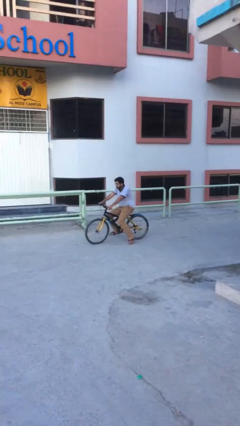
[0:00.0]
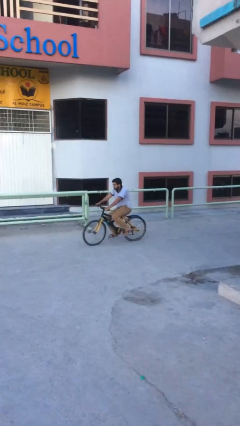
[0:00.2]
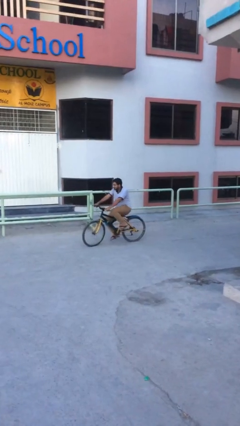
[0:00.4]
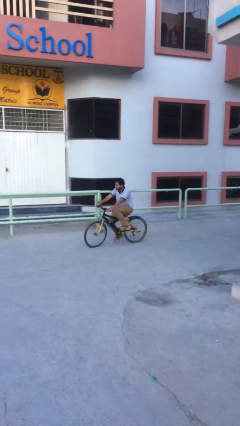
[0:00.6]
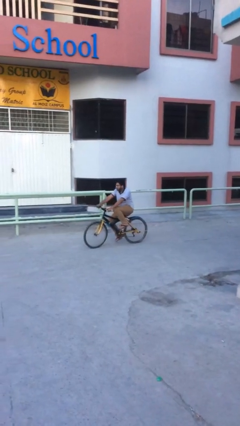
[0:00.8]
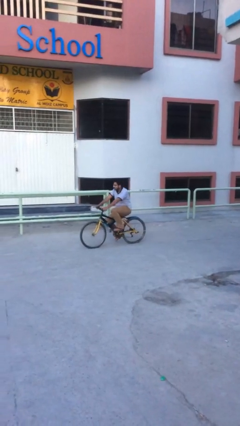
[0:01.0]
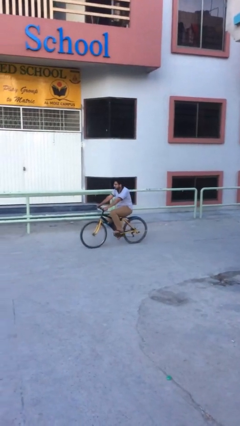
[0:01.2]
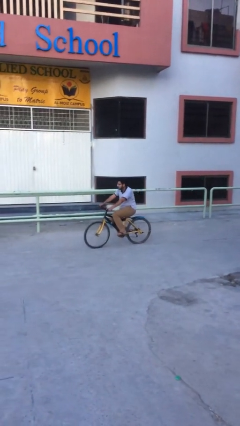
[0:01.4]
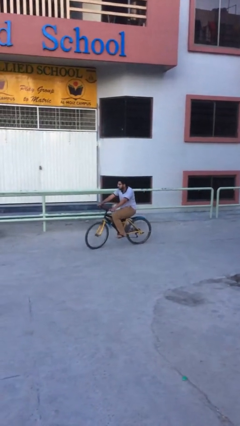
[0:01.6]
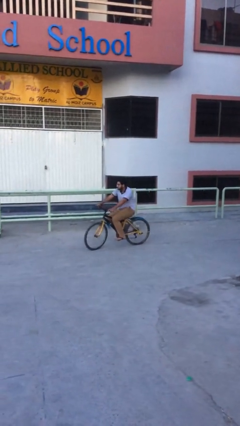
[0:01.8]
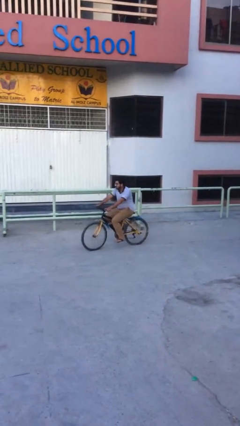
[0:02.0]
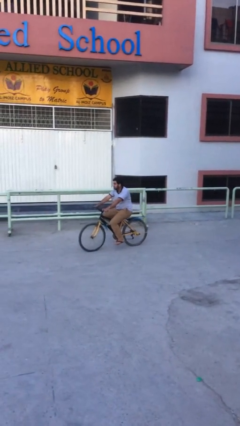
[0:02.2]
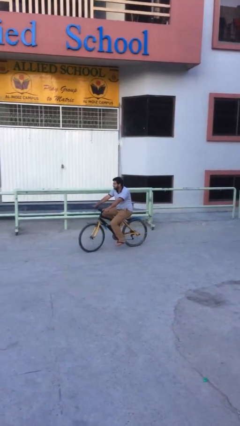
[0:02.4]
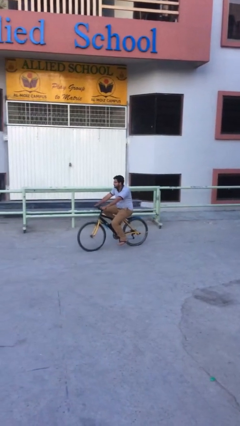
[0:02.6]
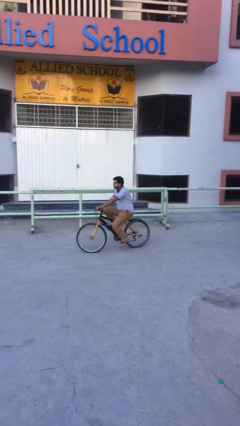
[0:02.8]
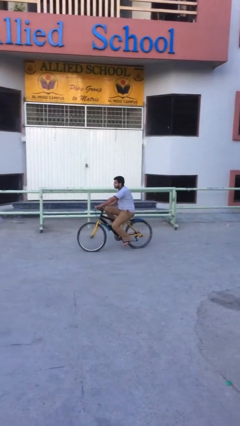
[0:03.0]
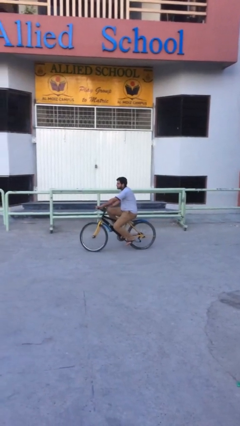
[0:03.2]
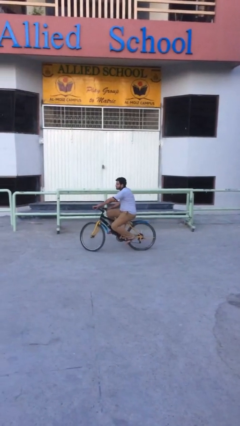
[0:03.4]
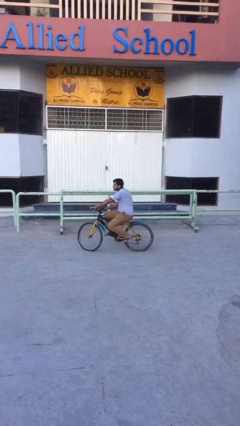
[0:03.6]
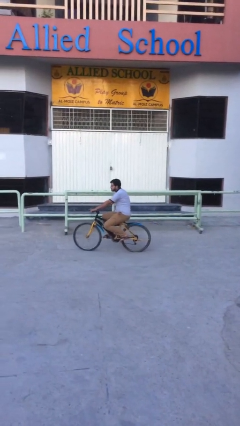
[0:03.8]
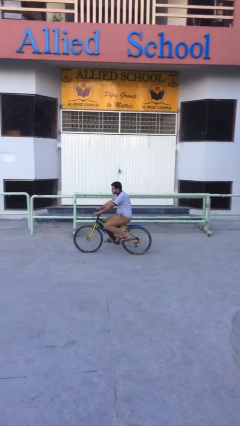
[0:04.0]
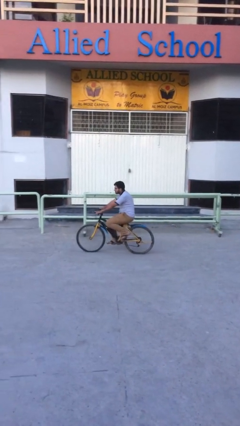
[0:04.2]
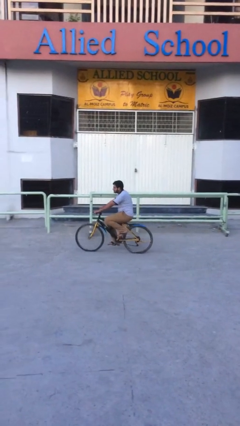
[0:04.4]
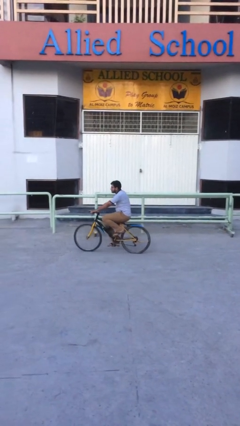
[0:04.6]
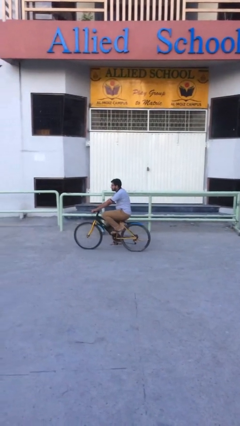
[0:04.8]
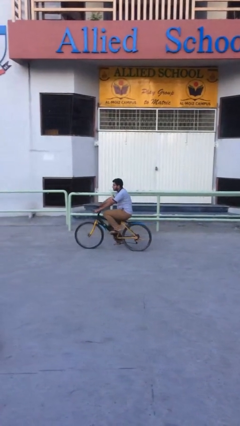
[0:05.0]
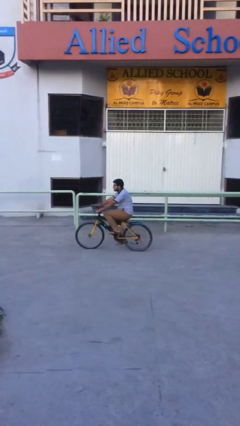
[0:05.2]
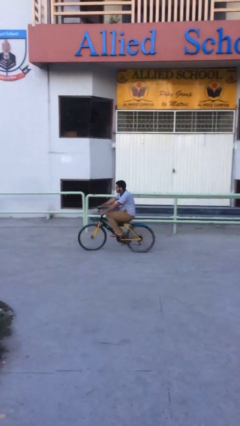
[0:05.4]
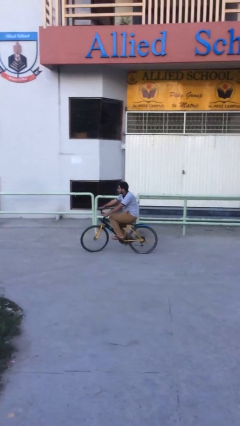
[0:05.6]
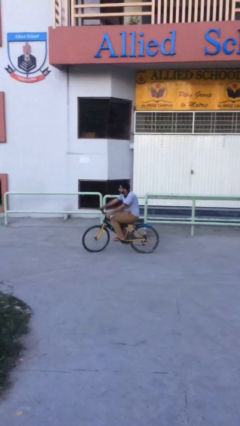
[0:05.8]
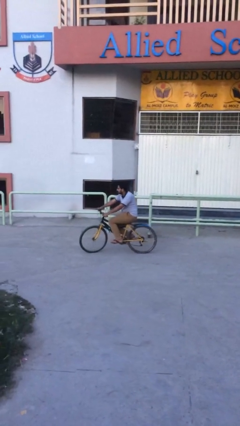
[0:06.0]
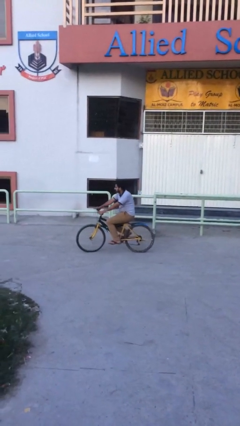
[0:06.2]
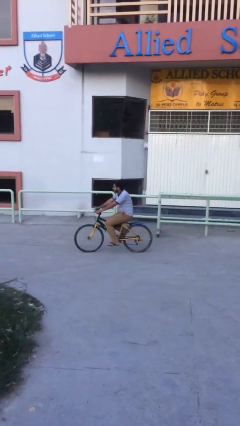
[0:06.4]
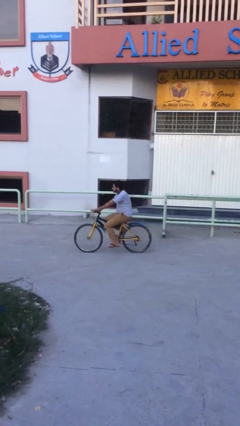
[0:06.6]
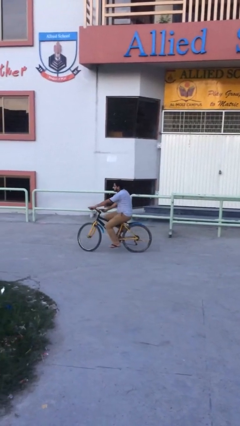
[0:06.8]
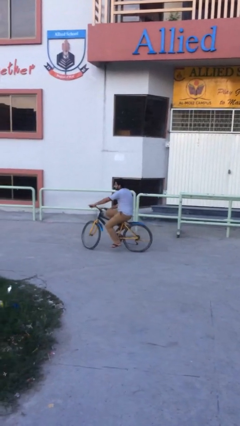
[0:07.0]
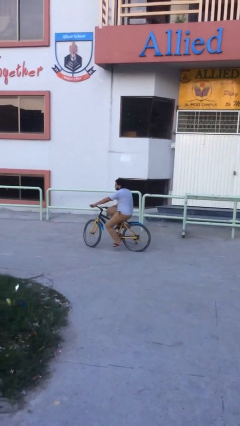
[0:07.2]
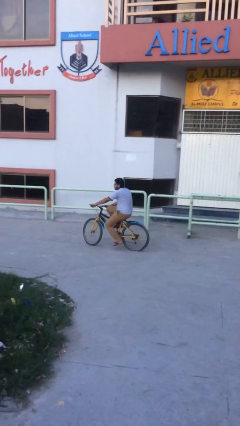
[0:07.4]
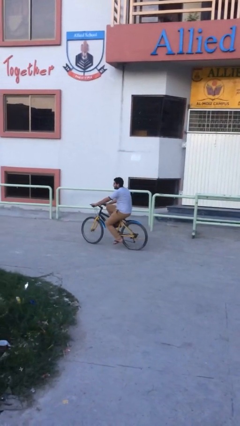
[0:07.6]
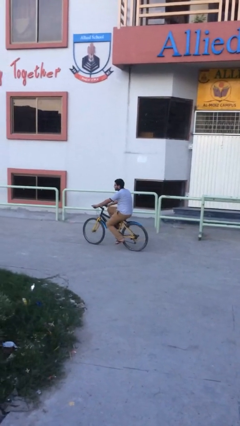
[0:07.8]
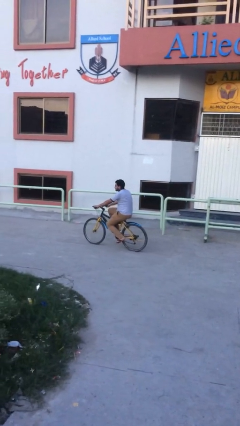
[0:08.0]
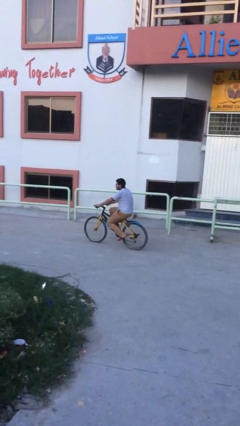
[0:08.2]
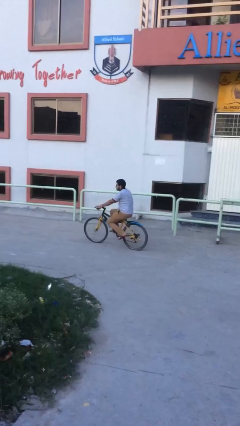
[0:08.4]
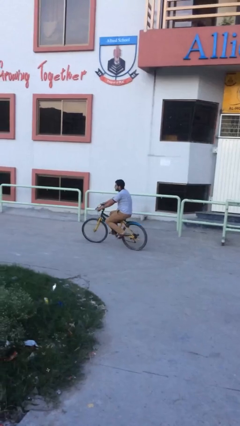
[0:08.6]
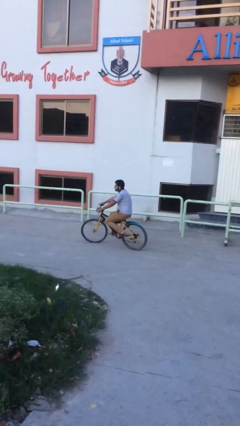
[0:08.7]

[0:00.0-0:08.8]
person rides bicycle

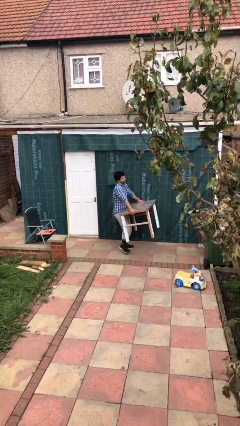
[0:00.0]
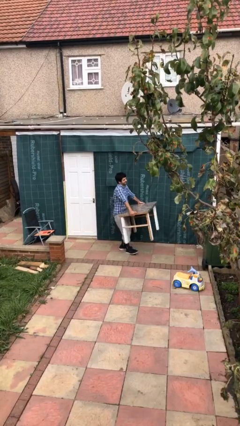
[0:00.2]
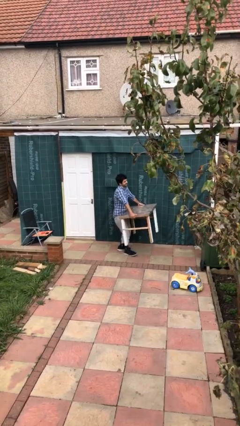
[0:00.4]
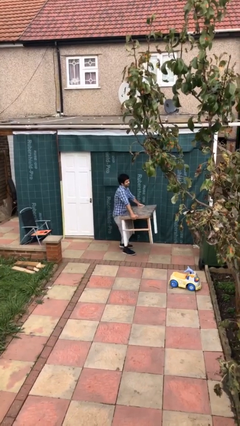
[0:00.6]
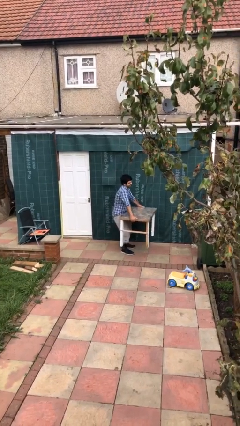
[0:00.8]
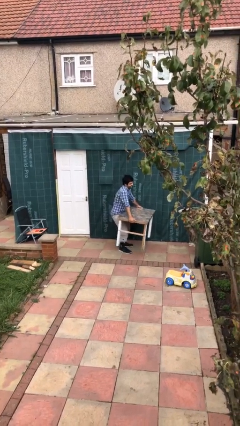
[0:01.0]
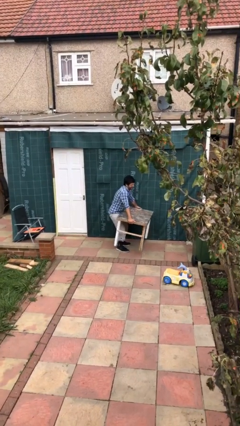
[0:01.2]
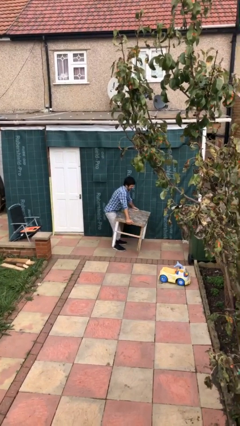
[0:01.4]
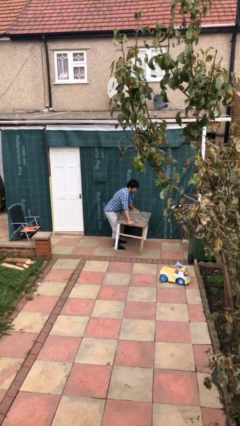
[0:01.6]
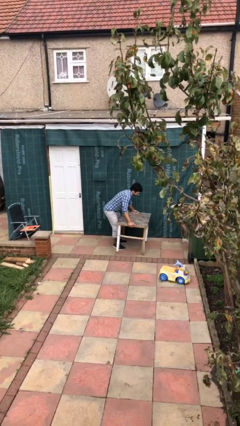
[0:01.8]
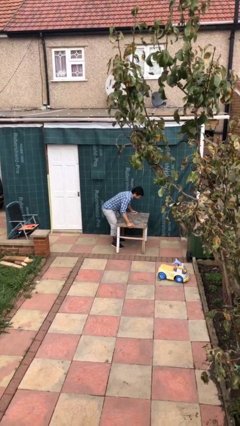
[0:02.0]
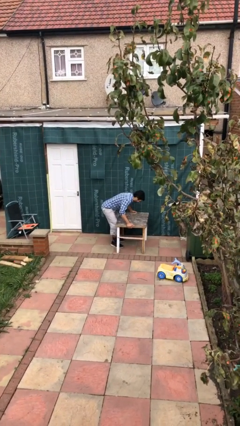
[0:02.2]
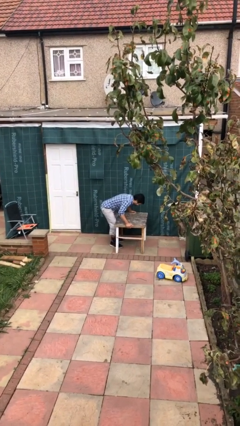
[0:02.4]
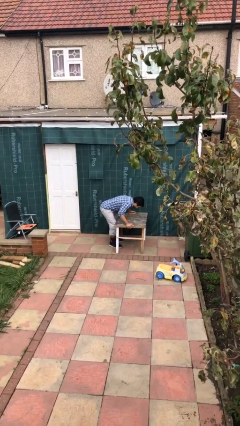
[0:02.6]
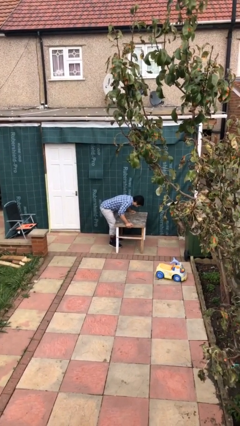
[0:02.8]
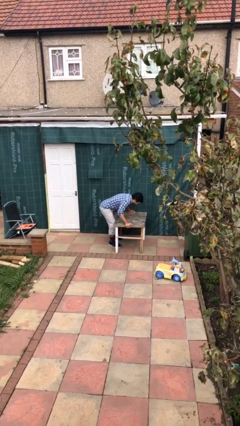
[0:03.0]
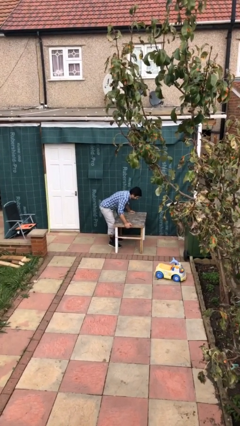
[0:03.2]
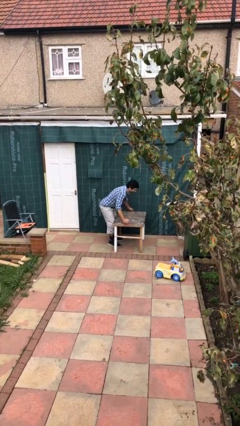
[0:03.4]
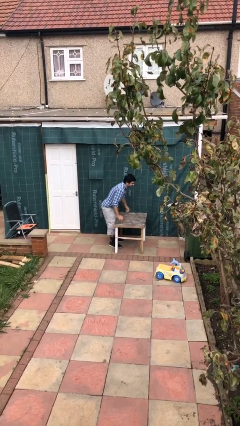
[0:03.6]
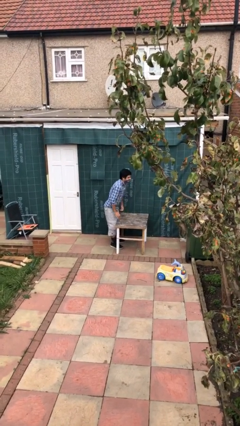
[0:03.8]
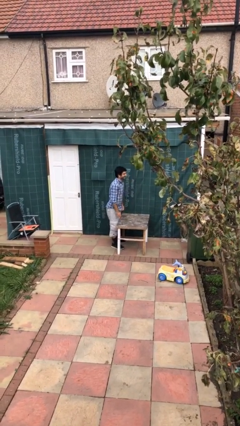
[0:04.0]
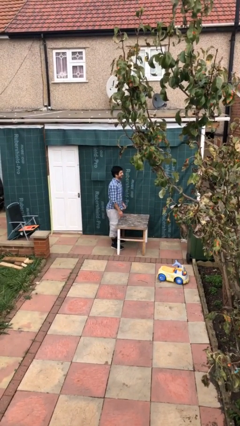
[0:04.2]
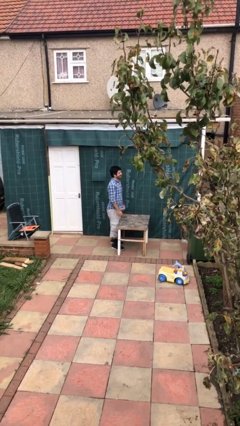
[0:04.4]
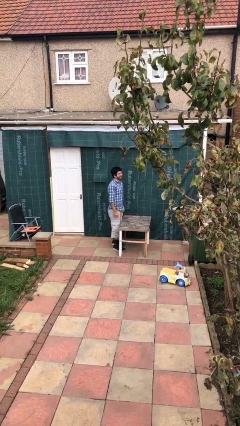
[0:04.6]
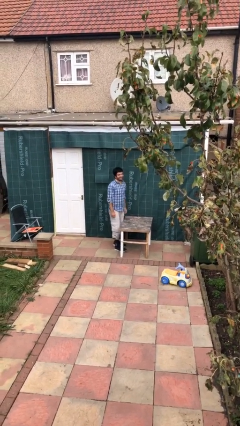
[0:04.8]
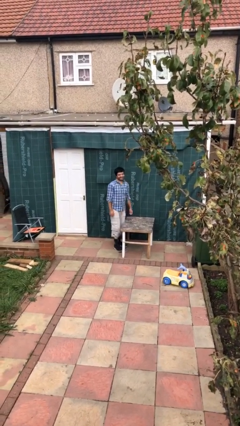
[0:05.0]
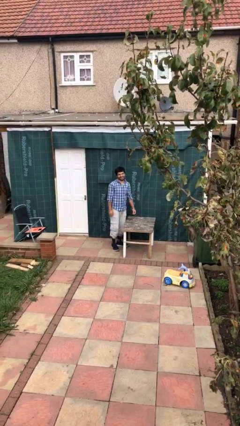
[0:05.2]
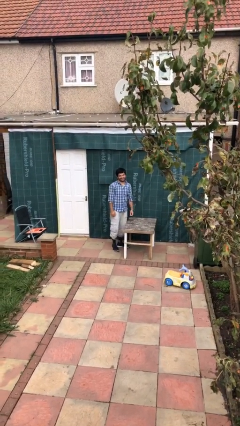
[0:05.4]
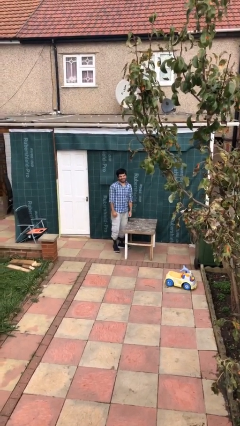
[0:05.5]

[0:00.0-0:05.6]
person puts down object on floor

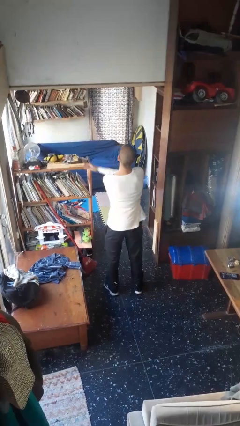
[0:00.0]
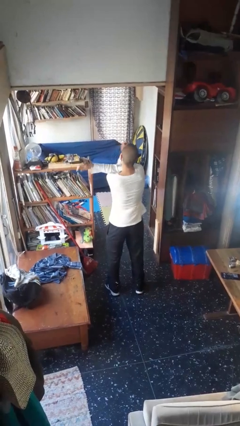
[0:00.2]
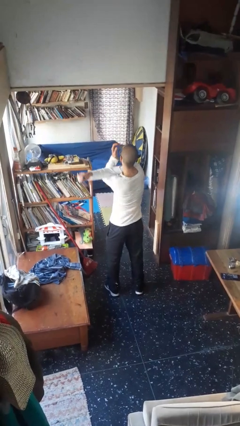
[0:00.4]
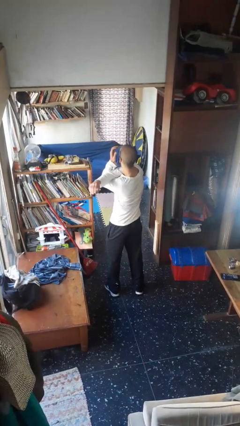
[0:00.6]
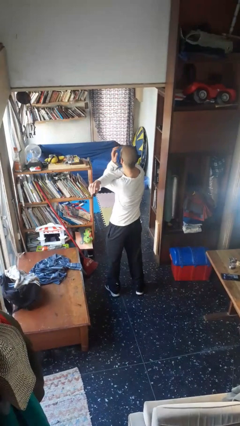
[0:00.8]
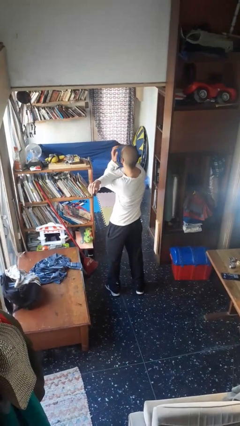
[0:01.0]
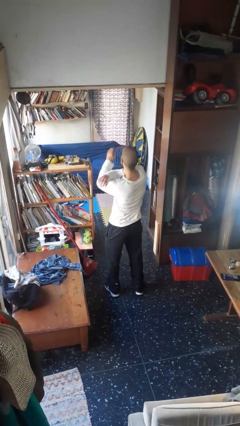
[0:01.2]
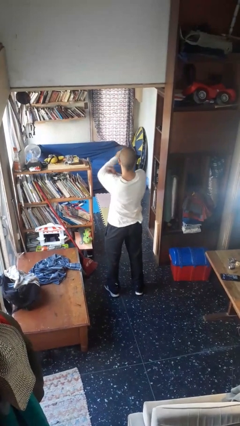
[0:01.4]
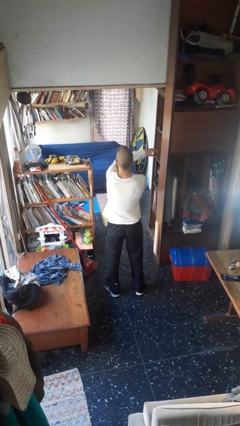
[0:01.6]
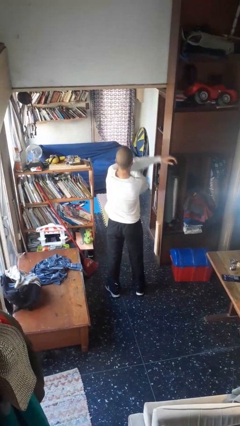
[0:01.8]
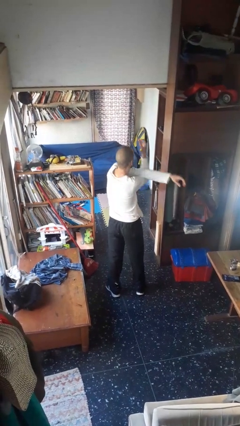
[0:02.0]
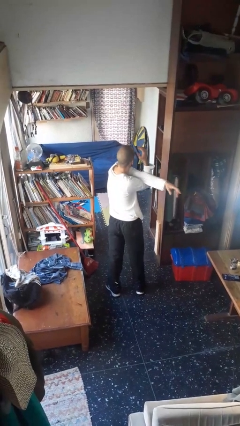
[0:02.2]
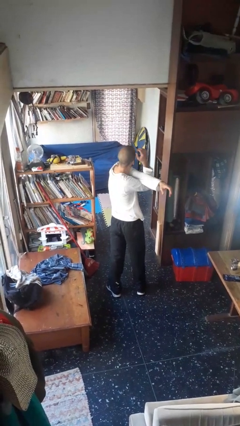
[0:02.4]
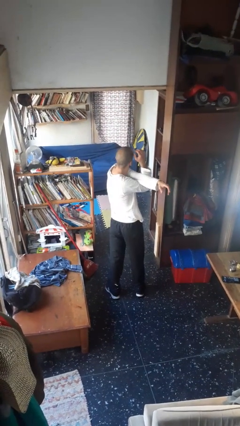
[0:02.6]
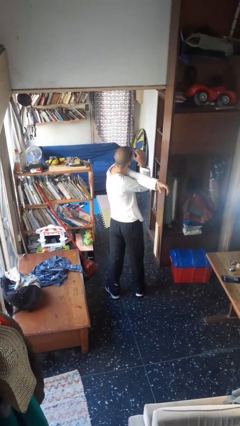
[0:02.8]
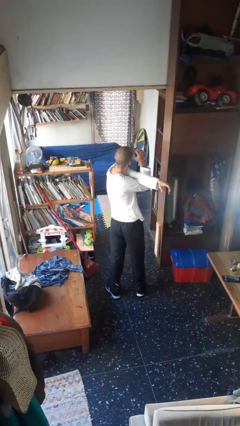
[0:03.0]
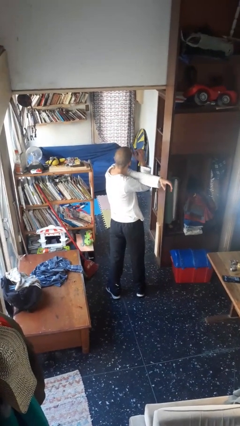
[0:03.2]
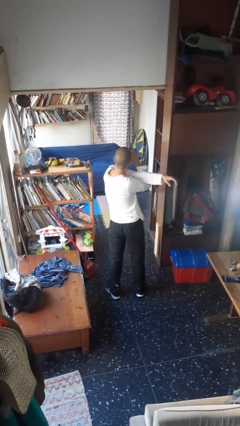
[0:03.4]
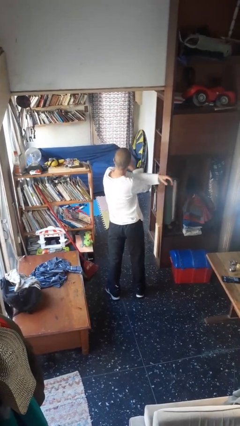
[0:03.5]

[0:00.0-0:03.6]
person stretches arms to side
